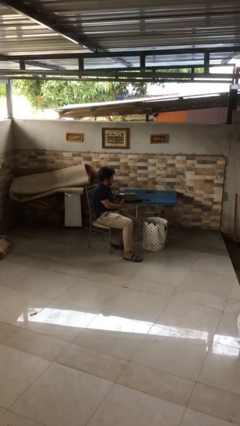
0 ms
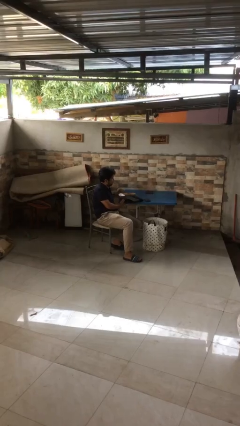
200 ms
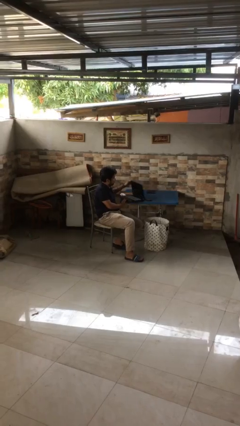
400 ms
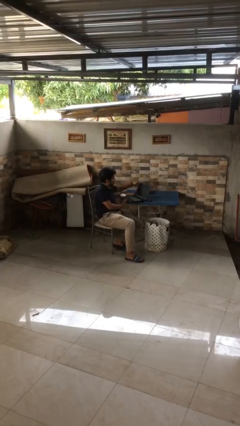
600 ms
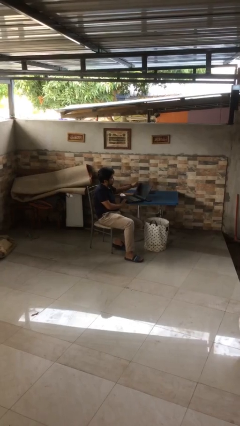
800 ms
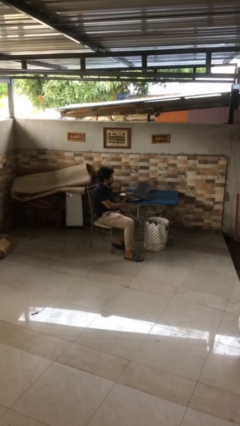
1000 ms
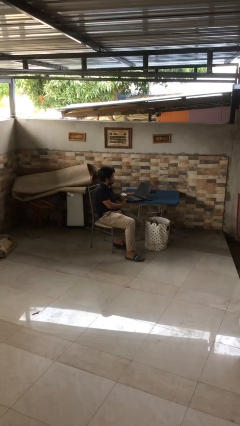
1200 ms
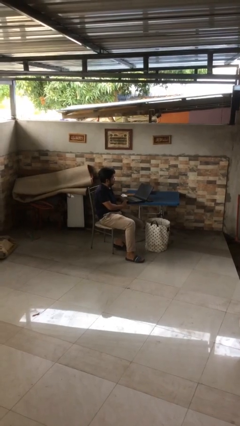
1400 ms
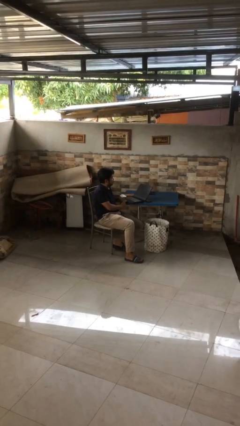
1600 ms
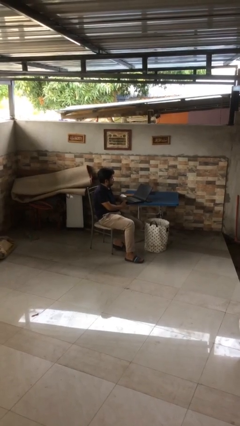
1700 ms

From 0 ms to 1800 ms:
person opens laptop

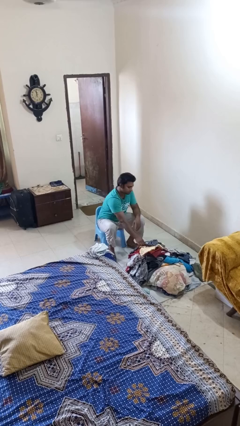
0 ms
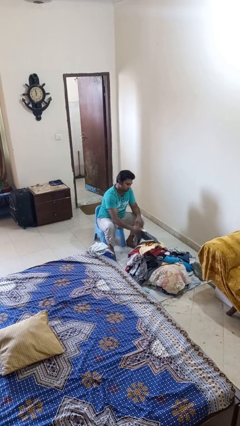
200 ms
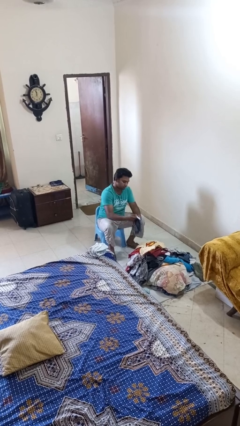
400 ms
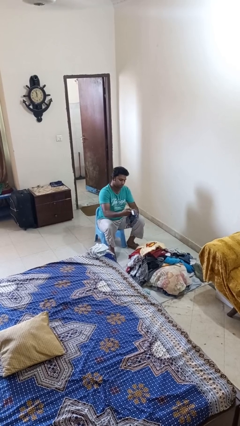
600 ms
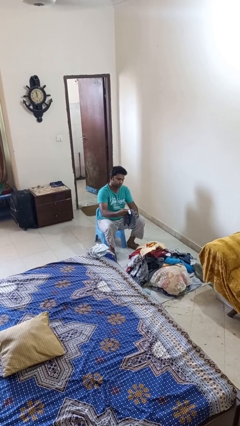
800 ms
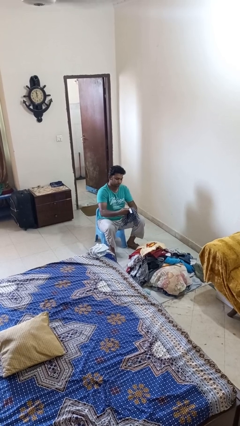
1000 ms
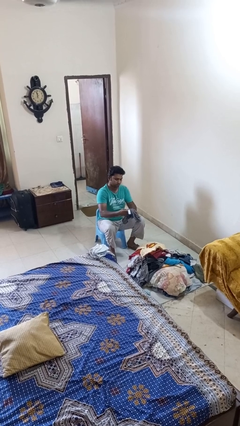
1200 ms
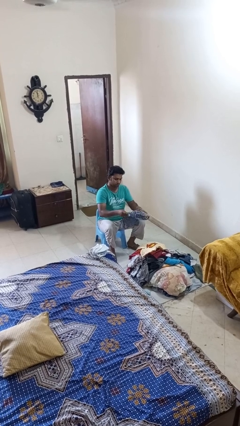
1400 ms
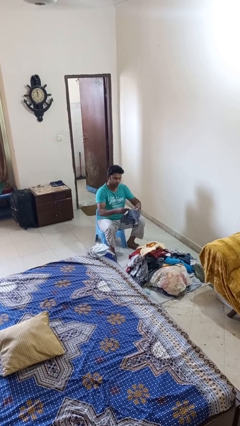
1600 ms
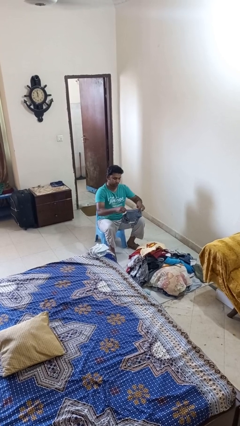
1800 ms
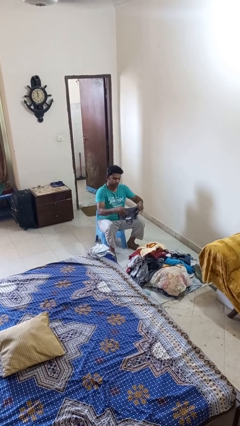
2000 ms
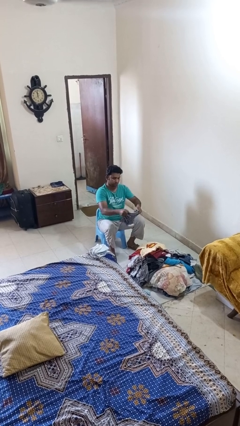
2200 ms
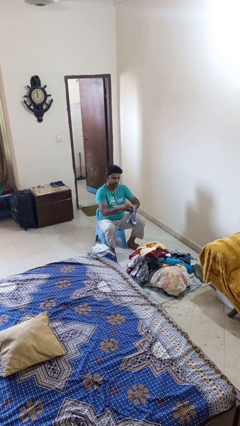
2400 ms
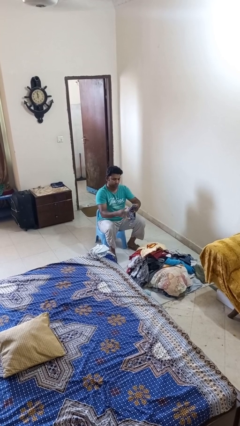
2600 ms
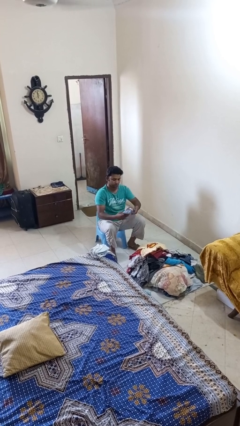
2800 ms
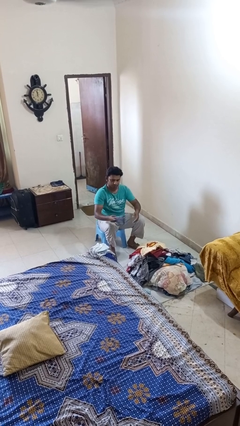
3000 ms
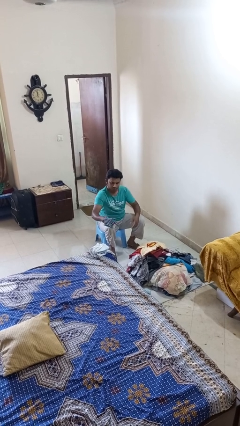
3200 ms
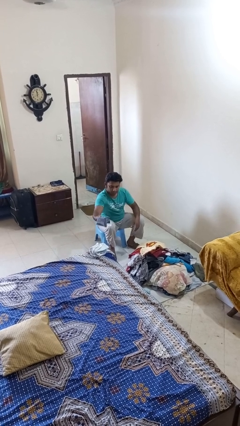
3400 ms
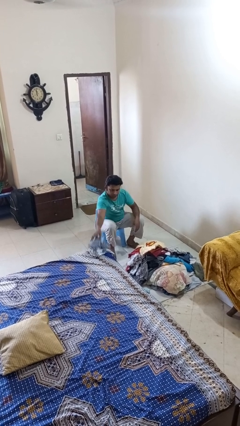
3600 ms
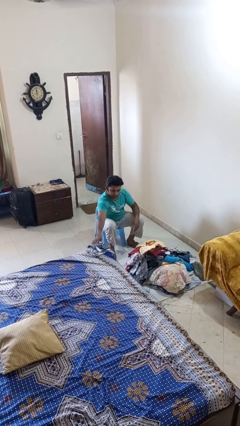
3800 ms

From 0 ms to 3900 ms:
person folds shirt

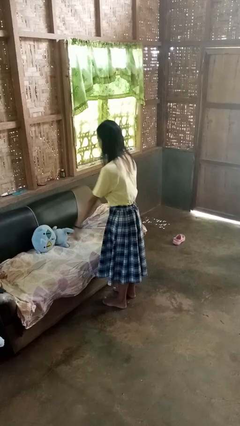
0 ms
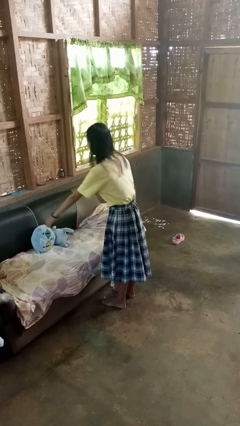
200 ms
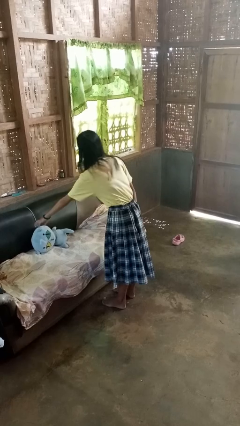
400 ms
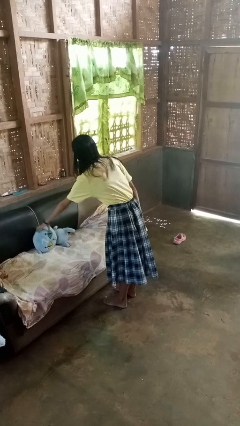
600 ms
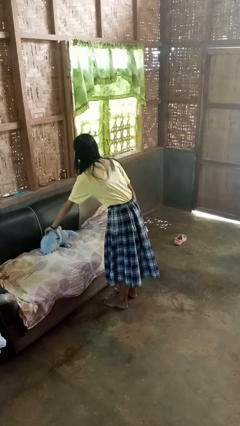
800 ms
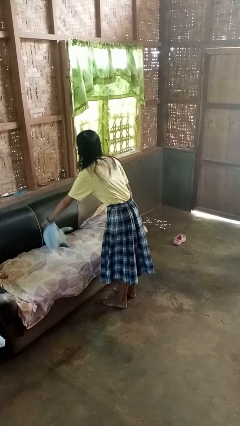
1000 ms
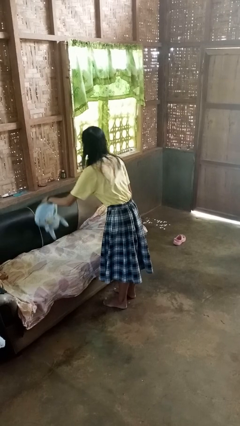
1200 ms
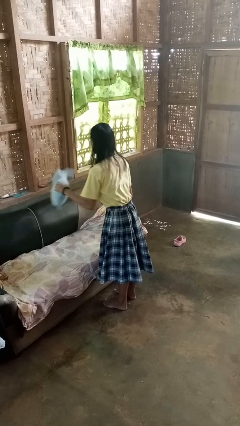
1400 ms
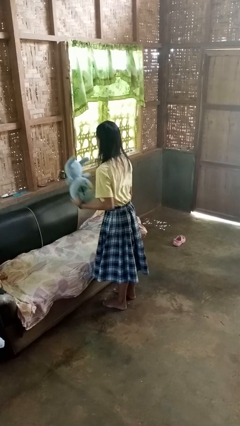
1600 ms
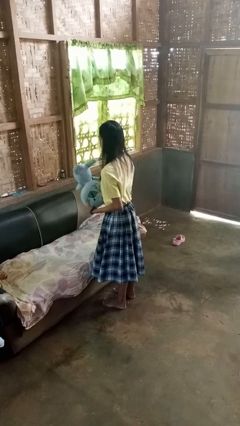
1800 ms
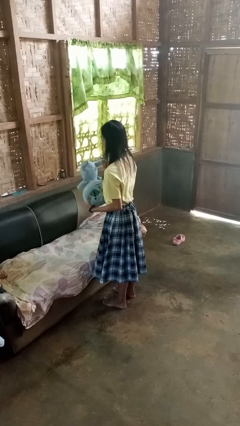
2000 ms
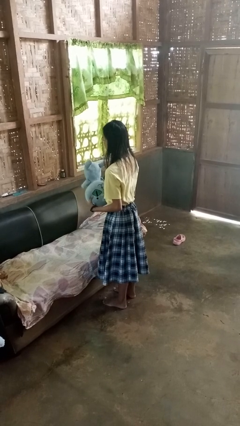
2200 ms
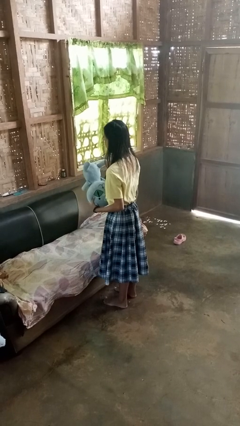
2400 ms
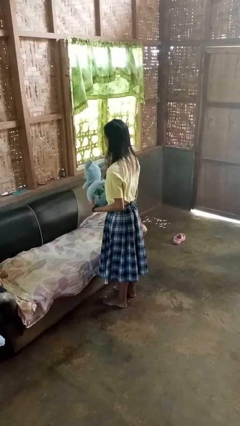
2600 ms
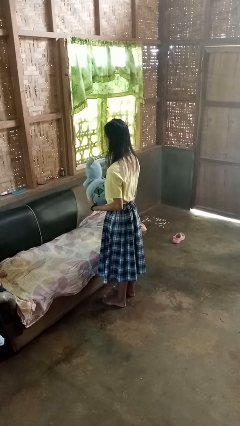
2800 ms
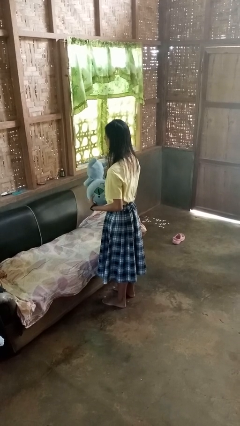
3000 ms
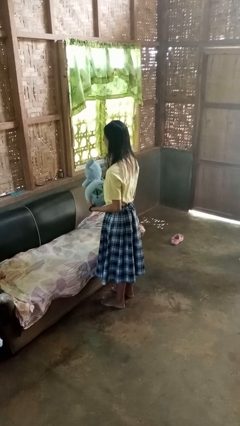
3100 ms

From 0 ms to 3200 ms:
person picks up object from couch

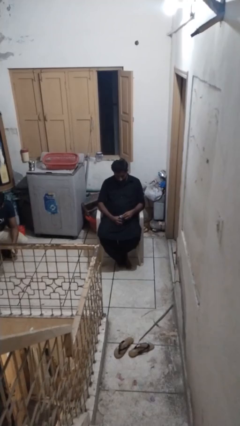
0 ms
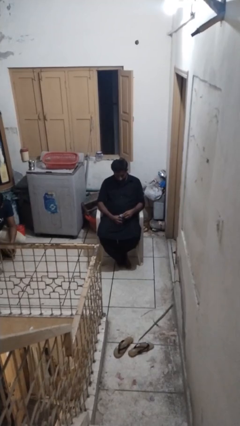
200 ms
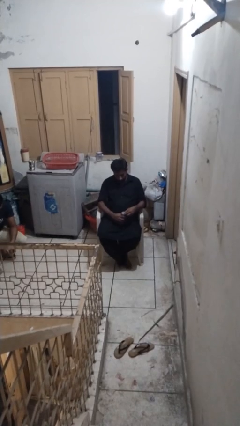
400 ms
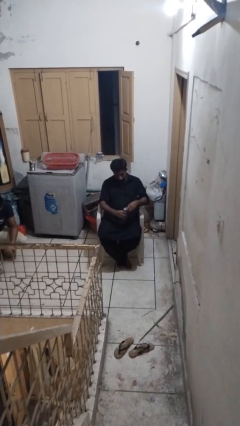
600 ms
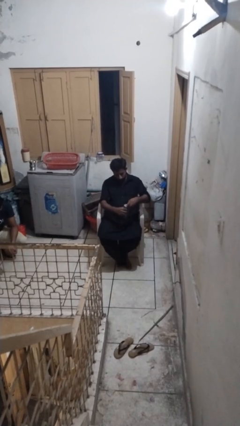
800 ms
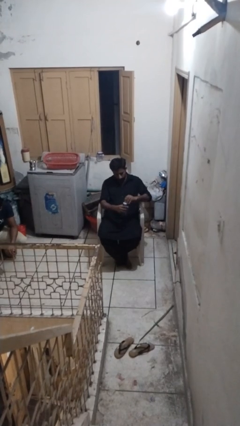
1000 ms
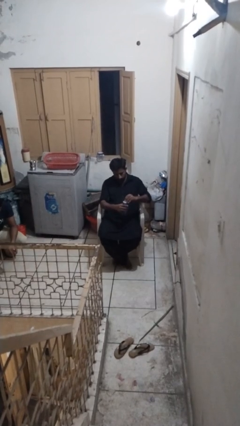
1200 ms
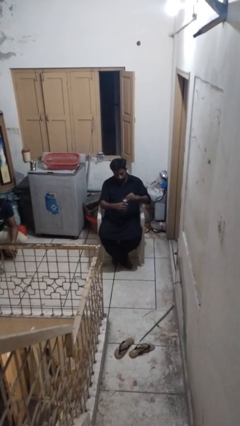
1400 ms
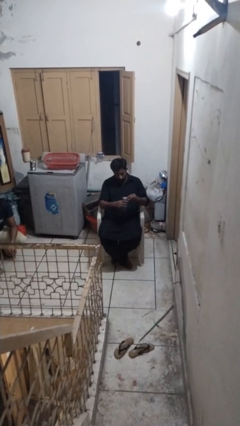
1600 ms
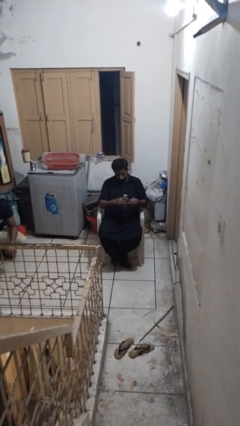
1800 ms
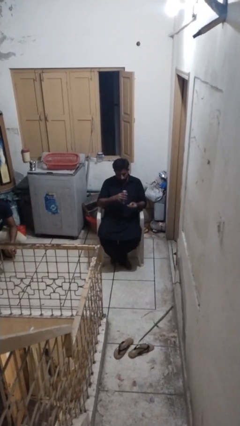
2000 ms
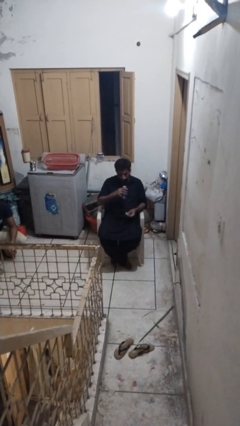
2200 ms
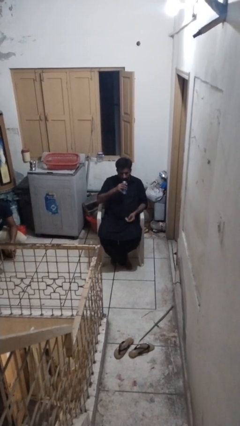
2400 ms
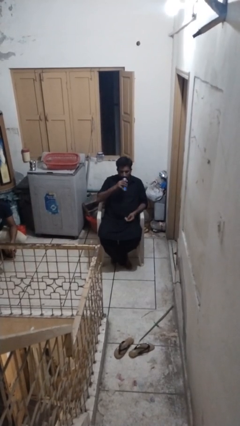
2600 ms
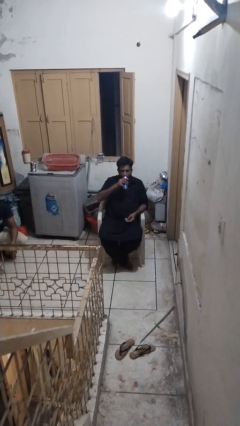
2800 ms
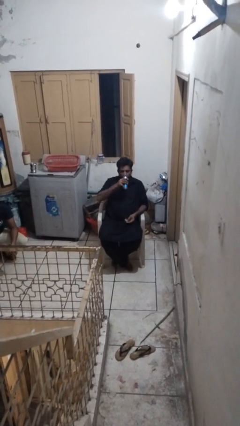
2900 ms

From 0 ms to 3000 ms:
person opens beverage can

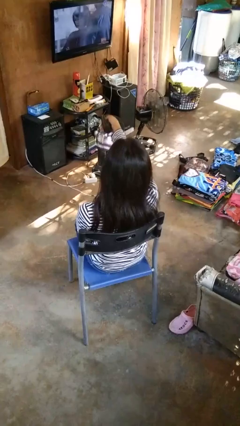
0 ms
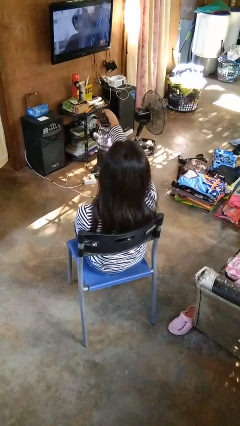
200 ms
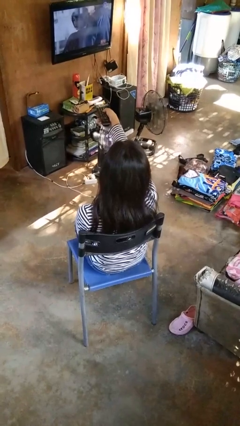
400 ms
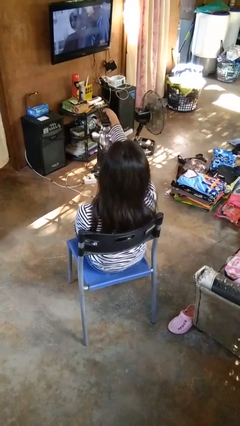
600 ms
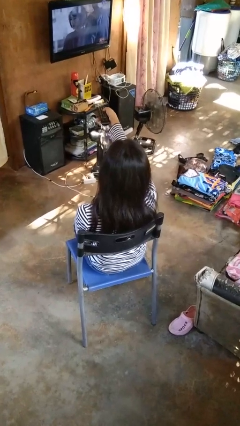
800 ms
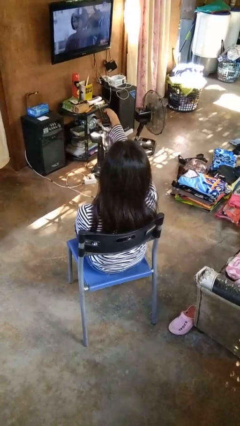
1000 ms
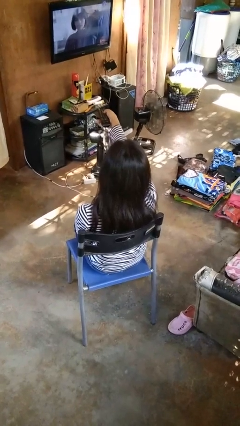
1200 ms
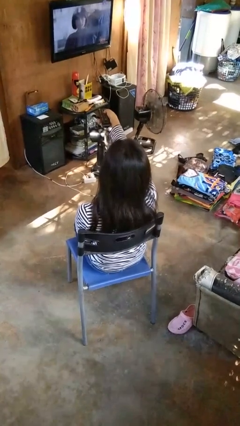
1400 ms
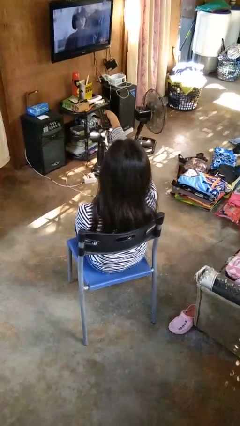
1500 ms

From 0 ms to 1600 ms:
person uses television remote

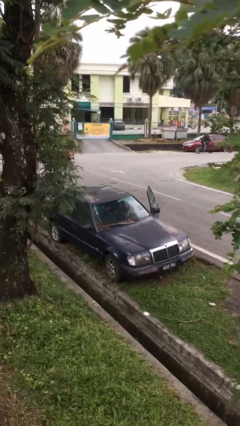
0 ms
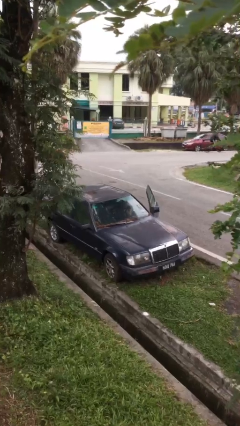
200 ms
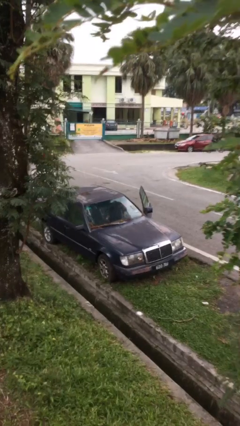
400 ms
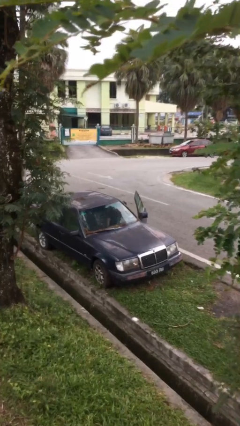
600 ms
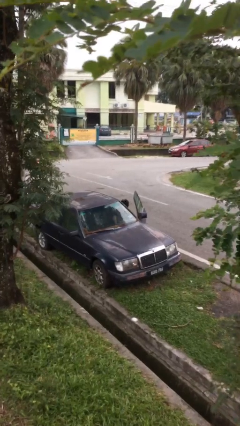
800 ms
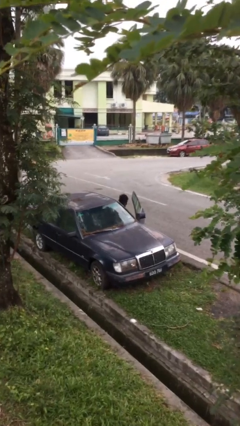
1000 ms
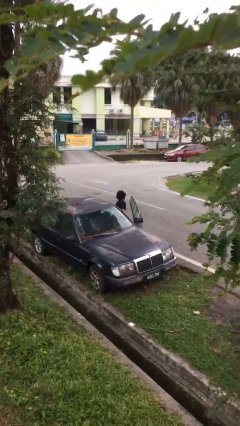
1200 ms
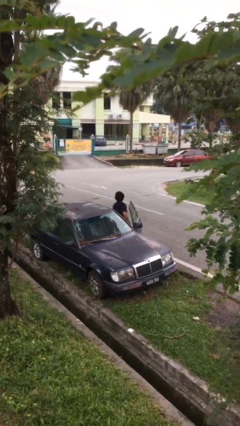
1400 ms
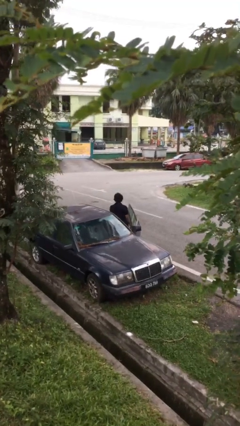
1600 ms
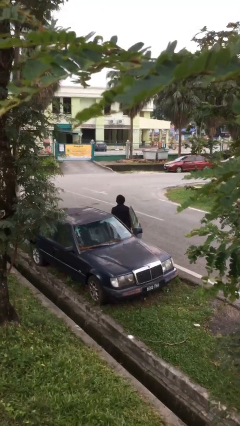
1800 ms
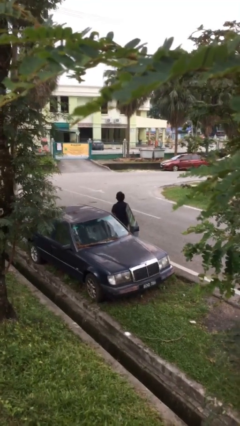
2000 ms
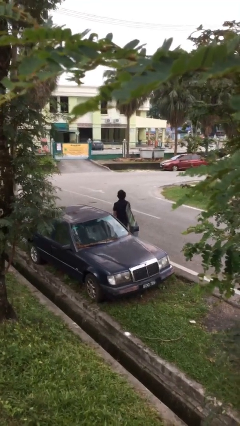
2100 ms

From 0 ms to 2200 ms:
person exits car
